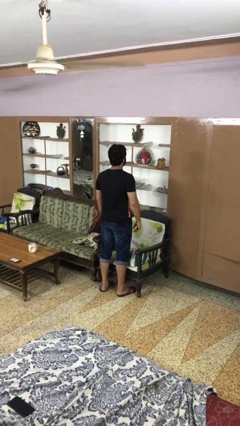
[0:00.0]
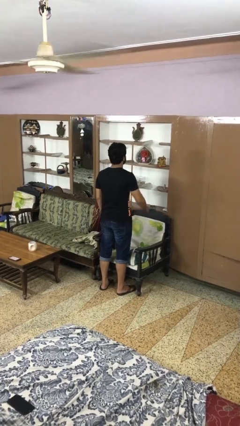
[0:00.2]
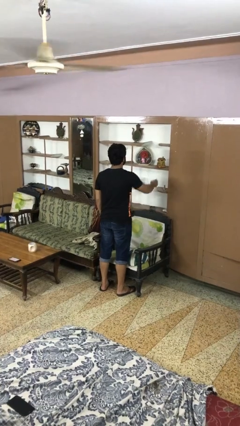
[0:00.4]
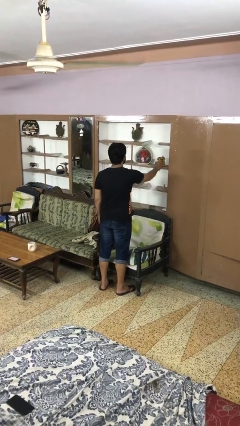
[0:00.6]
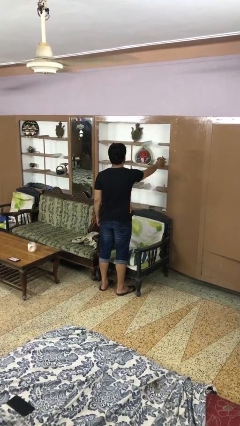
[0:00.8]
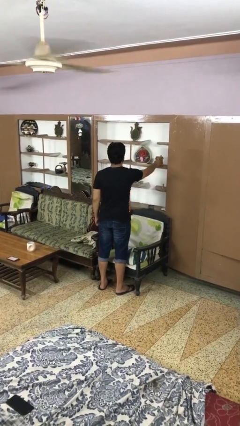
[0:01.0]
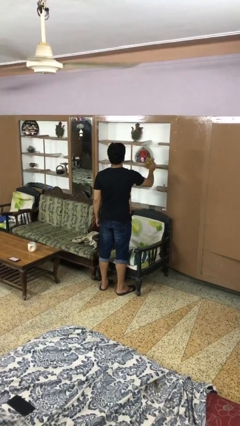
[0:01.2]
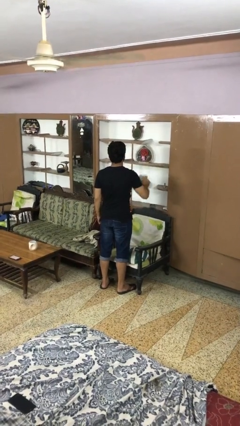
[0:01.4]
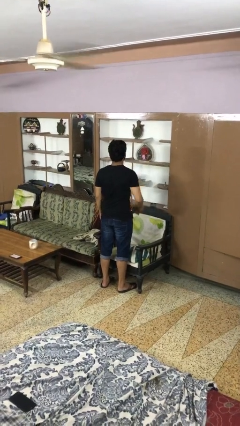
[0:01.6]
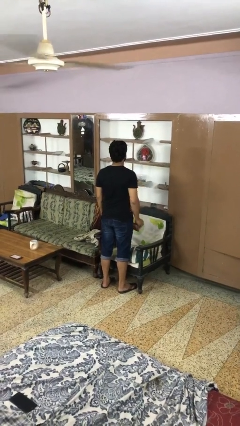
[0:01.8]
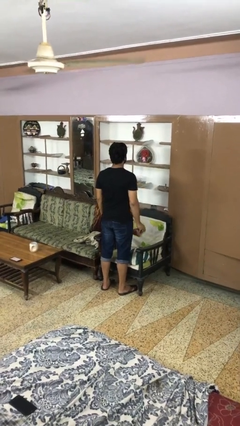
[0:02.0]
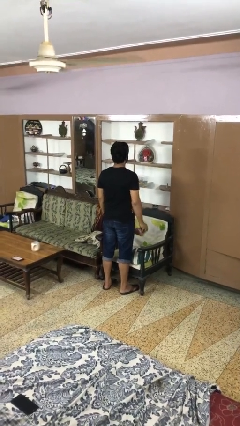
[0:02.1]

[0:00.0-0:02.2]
person picks up object from shelf

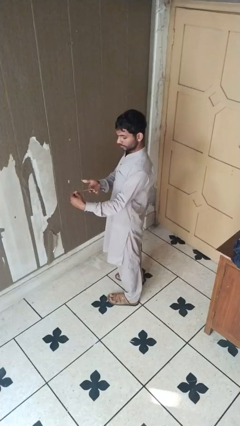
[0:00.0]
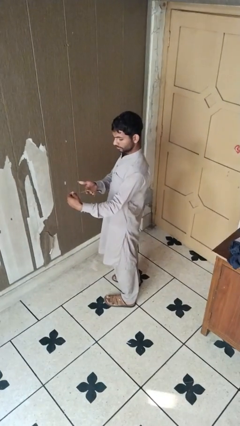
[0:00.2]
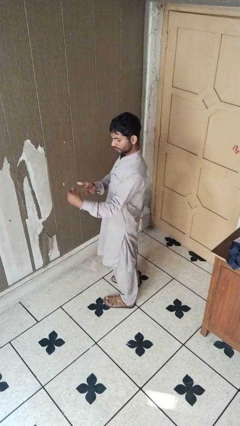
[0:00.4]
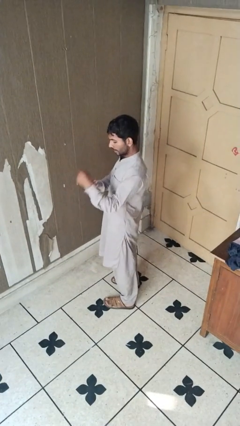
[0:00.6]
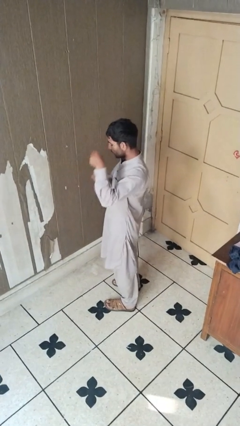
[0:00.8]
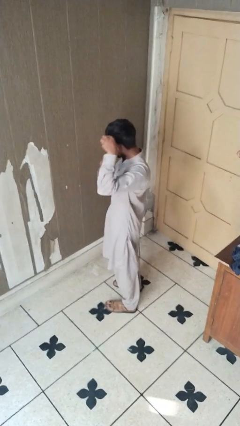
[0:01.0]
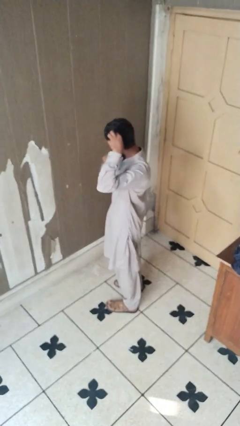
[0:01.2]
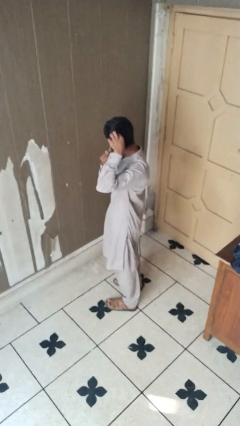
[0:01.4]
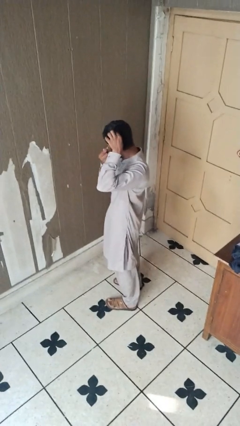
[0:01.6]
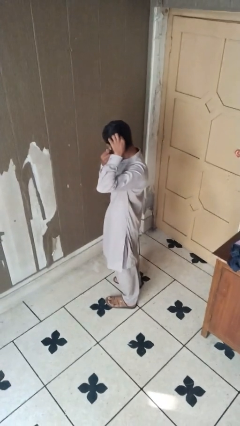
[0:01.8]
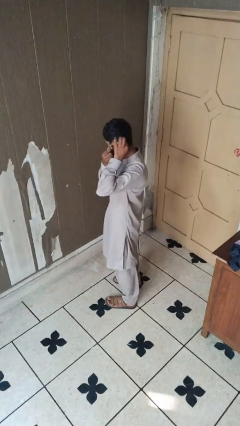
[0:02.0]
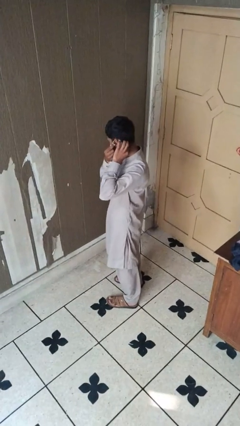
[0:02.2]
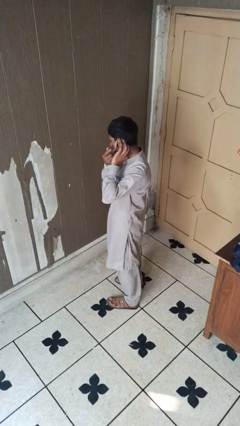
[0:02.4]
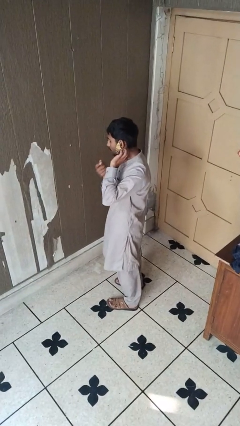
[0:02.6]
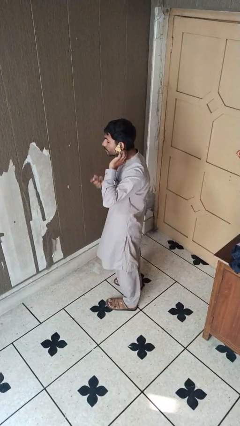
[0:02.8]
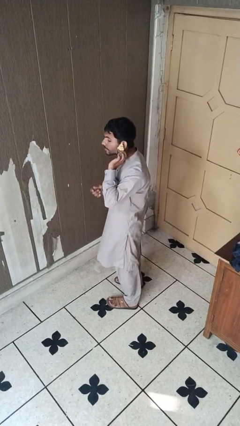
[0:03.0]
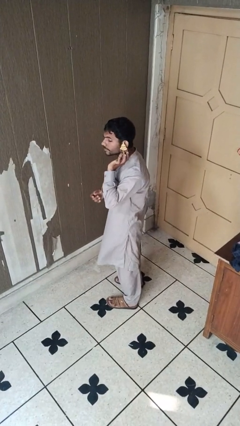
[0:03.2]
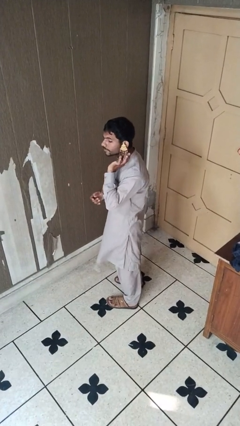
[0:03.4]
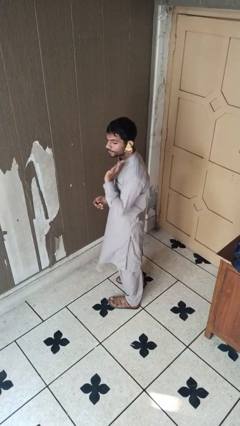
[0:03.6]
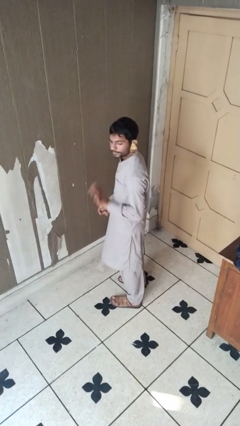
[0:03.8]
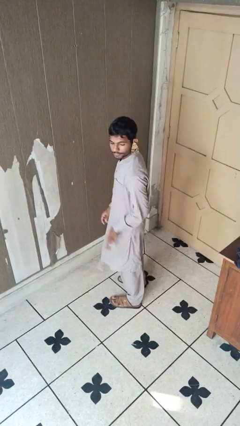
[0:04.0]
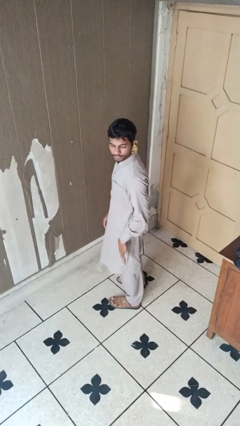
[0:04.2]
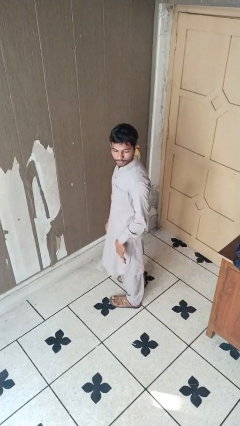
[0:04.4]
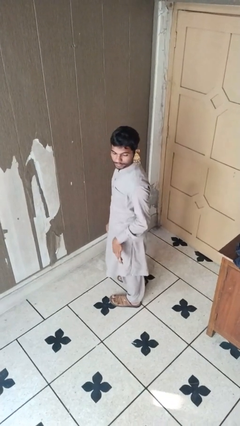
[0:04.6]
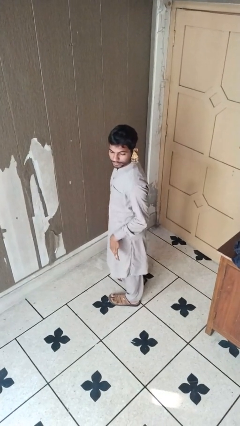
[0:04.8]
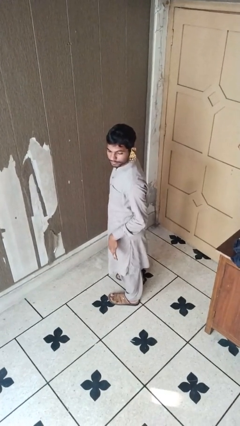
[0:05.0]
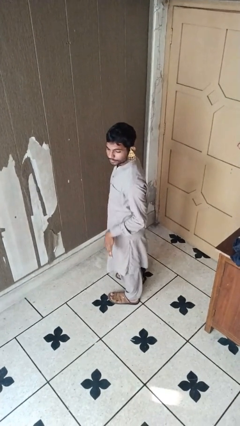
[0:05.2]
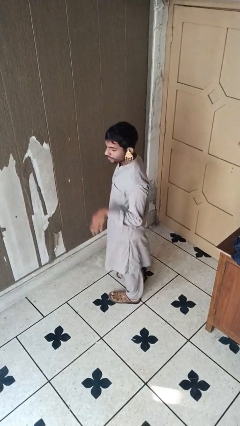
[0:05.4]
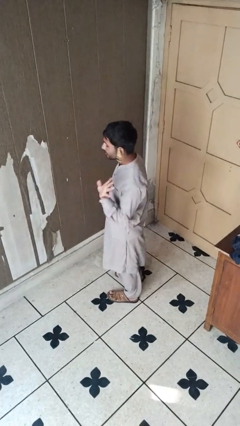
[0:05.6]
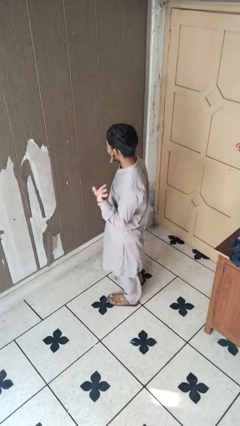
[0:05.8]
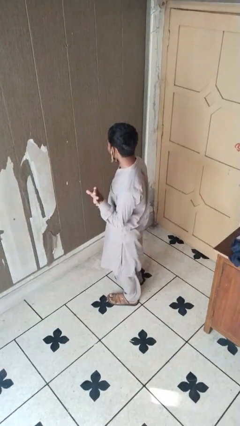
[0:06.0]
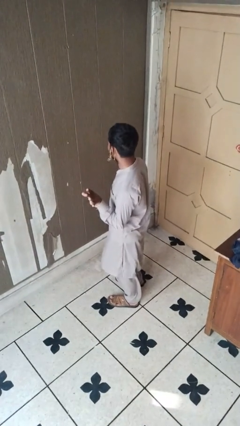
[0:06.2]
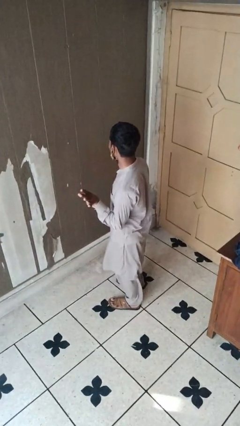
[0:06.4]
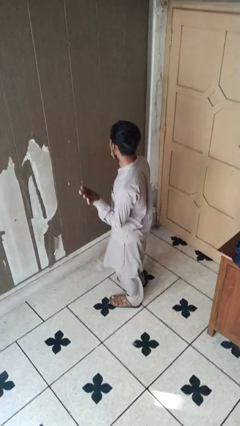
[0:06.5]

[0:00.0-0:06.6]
person puts on earrings

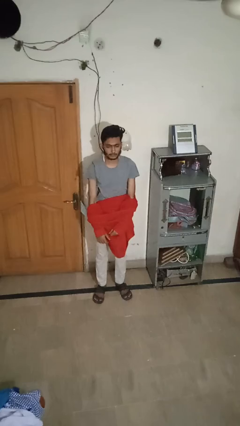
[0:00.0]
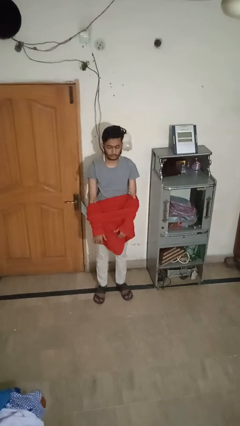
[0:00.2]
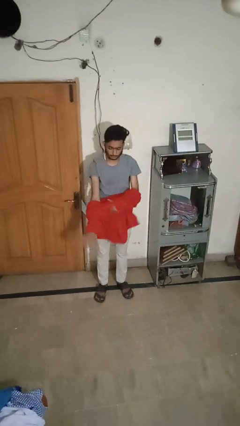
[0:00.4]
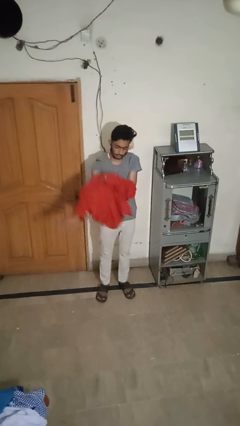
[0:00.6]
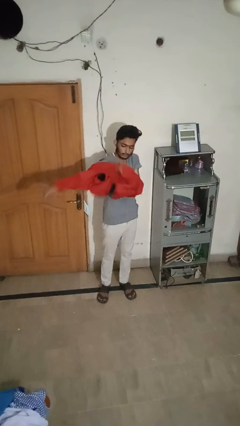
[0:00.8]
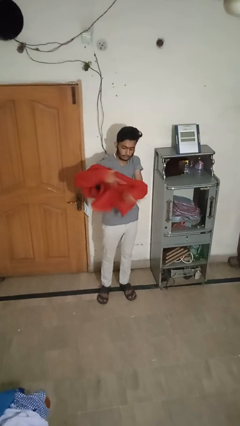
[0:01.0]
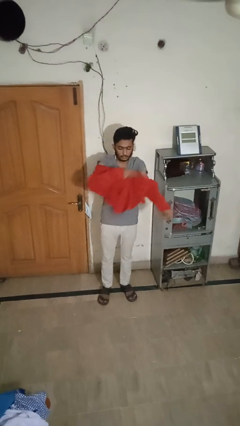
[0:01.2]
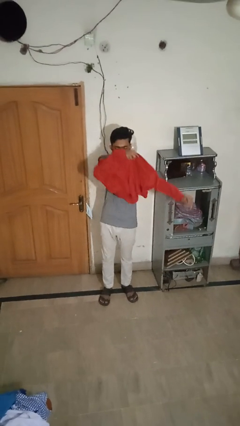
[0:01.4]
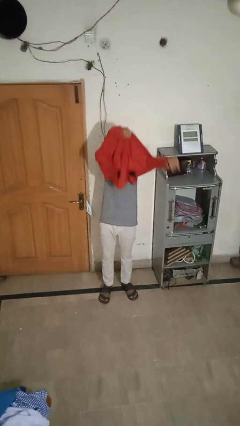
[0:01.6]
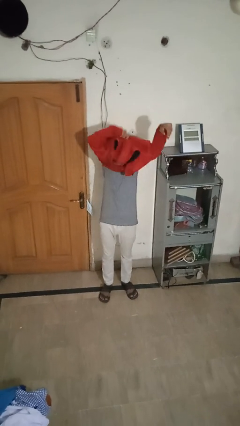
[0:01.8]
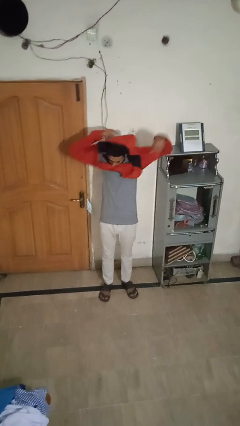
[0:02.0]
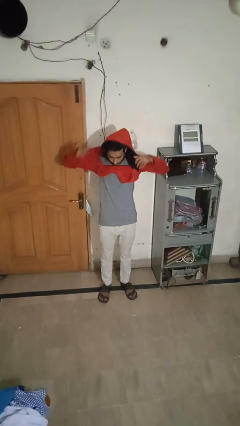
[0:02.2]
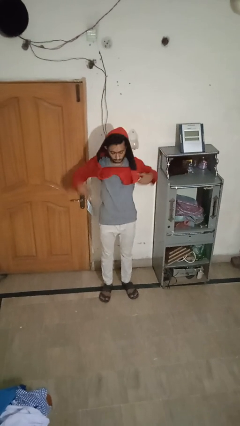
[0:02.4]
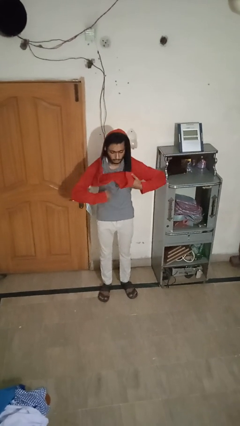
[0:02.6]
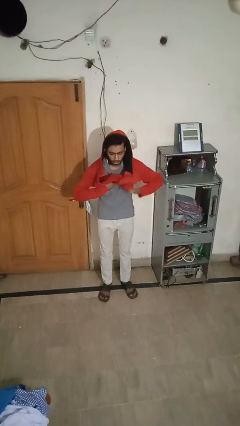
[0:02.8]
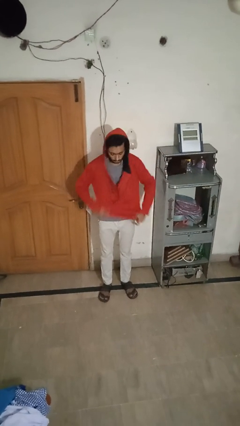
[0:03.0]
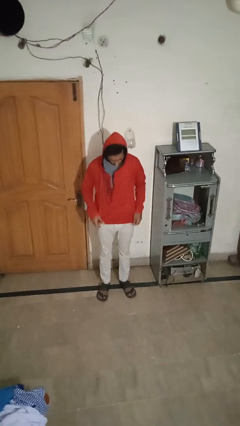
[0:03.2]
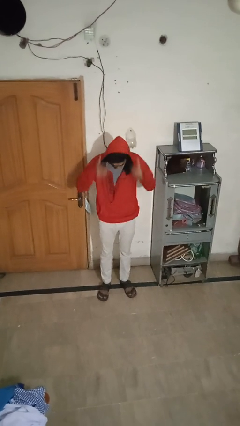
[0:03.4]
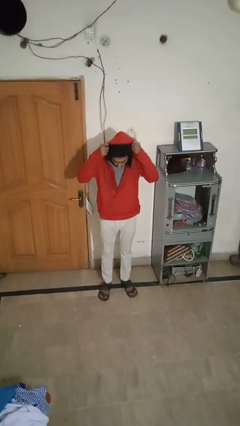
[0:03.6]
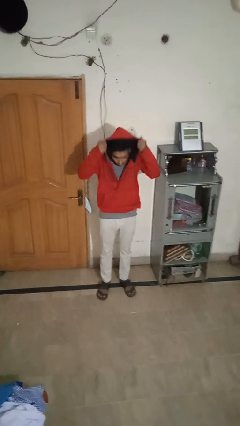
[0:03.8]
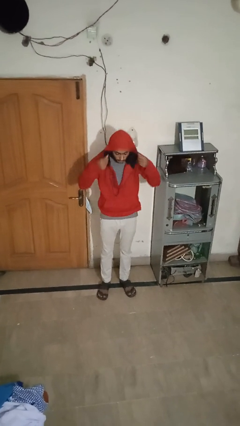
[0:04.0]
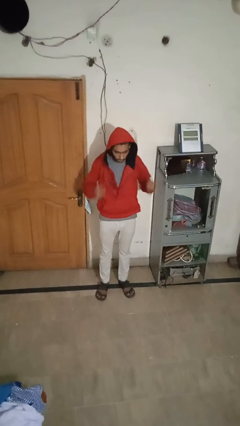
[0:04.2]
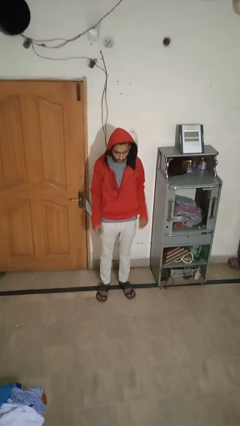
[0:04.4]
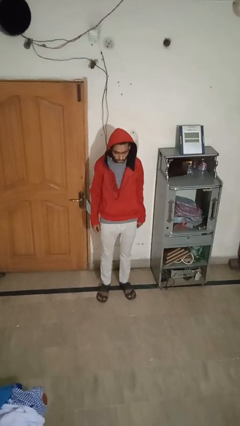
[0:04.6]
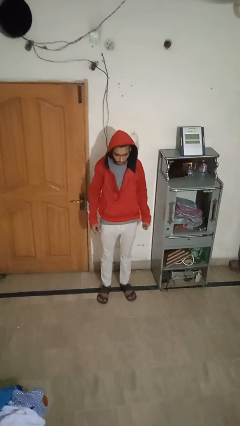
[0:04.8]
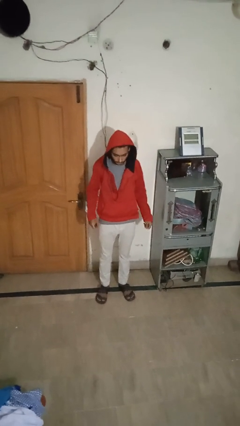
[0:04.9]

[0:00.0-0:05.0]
person puts on hoodie

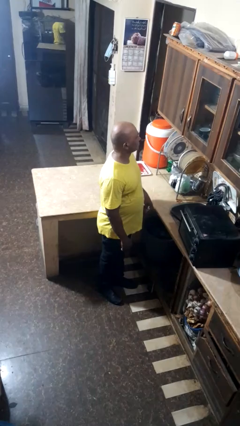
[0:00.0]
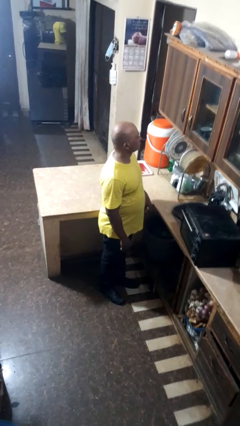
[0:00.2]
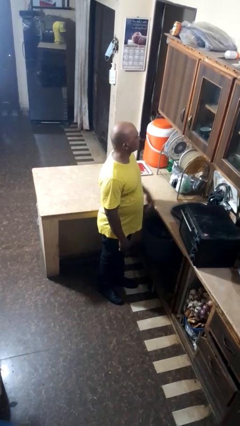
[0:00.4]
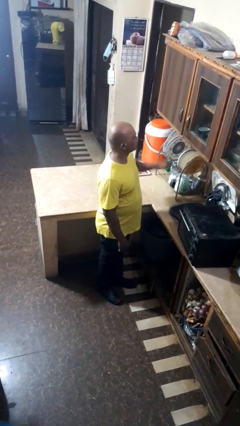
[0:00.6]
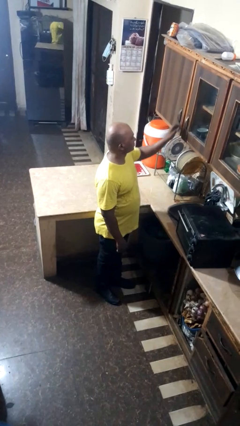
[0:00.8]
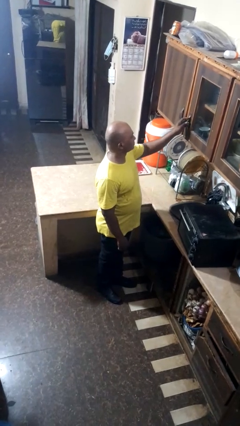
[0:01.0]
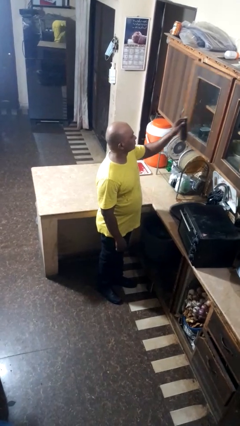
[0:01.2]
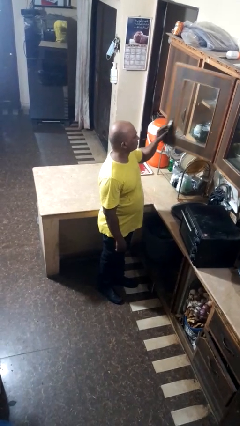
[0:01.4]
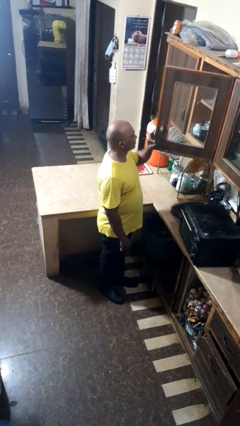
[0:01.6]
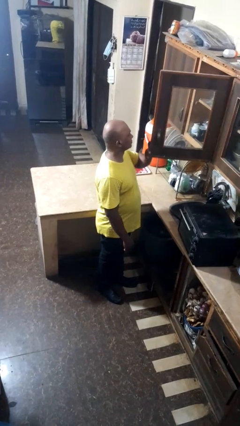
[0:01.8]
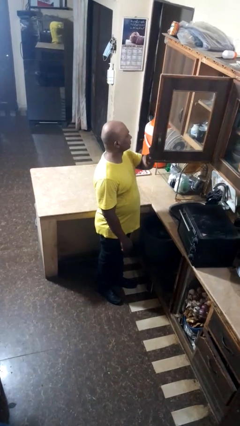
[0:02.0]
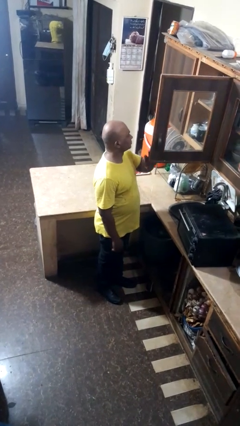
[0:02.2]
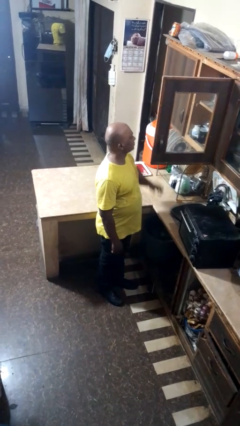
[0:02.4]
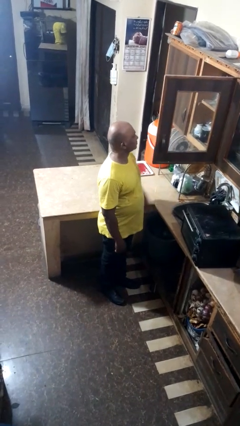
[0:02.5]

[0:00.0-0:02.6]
person opens cabinet

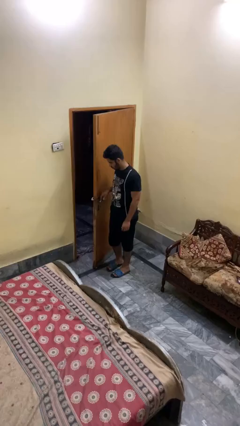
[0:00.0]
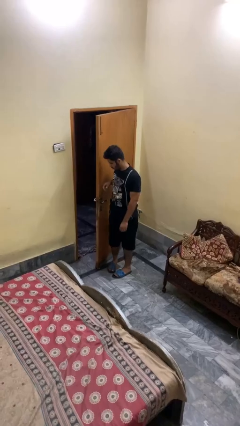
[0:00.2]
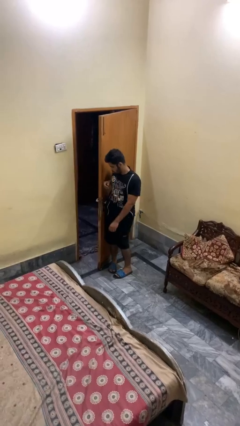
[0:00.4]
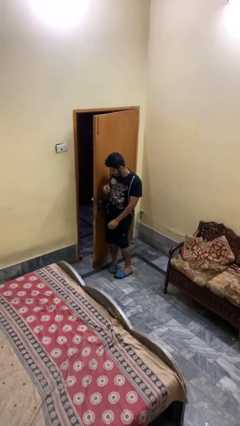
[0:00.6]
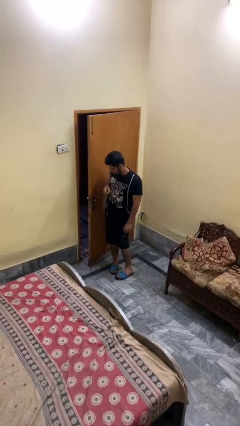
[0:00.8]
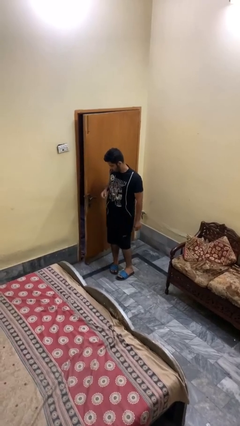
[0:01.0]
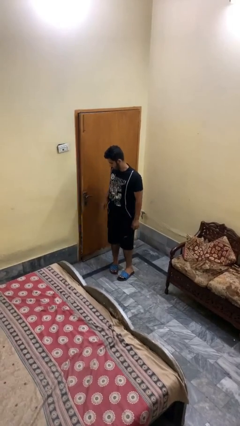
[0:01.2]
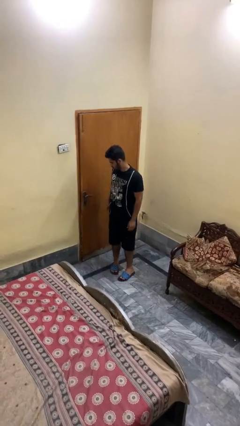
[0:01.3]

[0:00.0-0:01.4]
person closes door with hip
